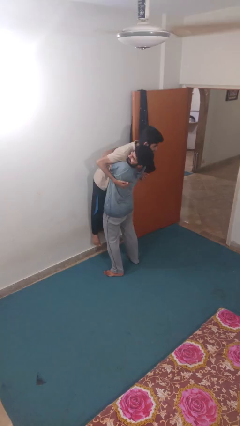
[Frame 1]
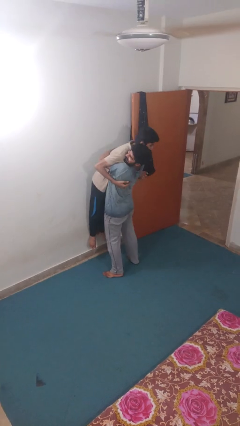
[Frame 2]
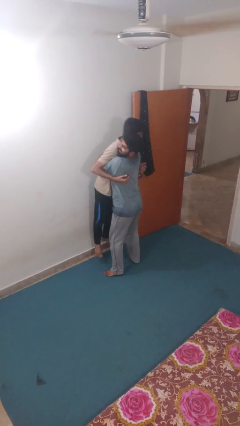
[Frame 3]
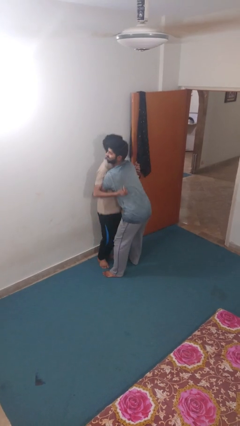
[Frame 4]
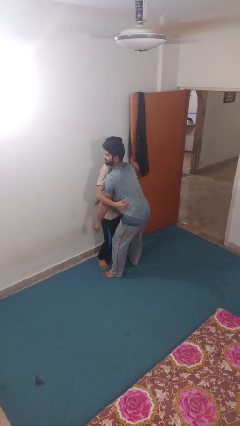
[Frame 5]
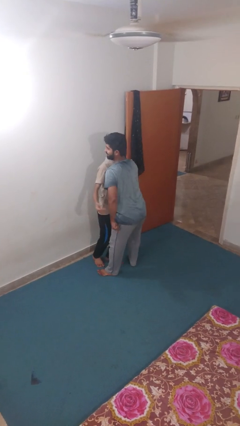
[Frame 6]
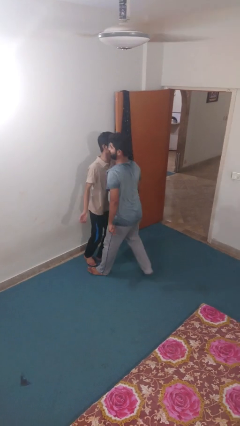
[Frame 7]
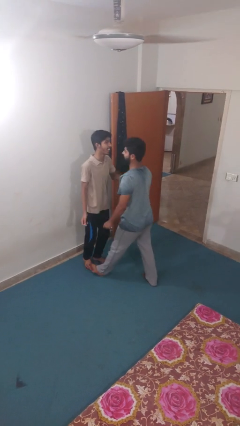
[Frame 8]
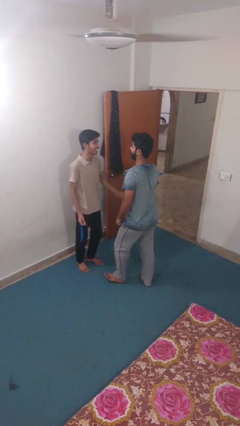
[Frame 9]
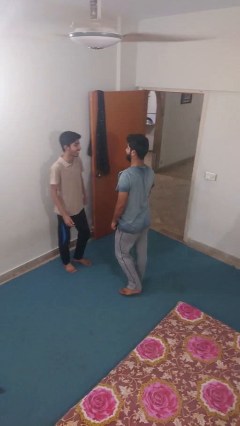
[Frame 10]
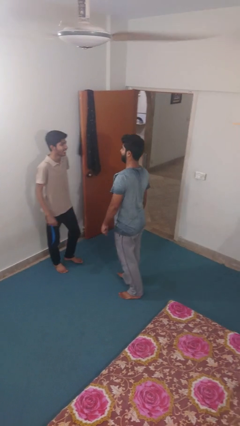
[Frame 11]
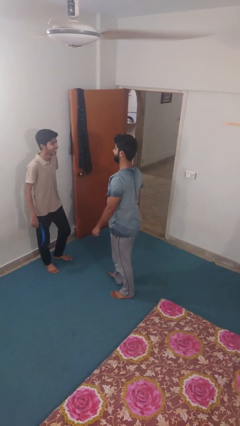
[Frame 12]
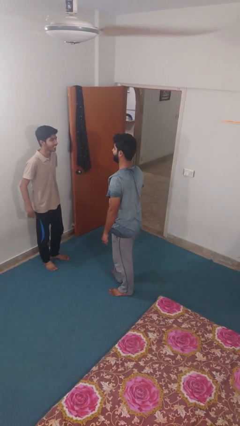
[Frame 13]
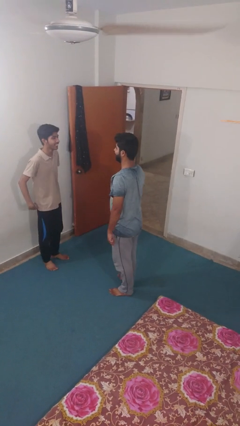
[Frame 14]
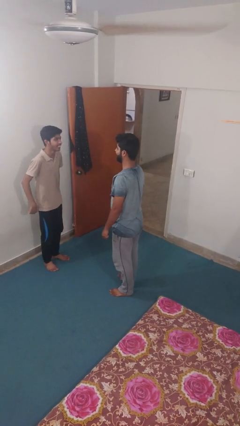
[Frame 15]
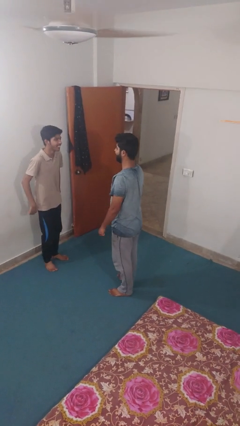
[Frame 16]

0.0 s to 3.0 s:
person puts down person

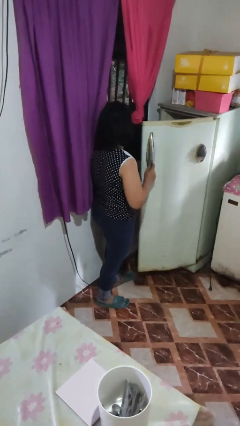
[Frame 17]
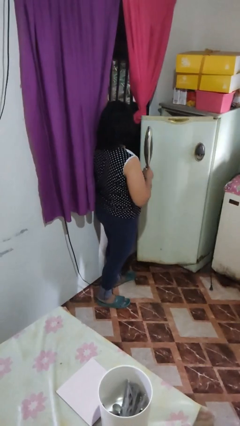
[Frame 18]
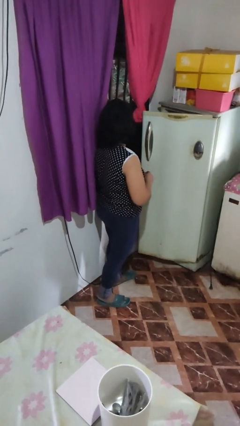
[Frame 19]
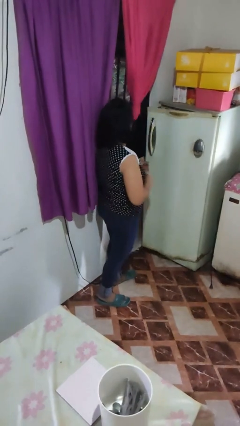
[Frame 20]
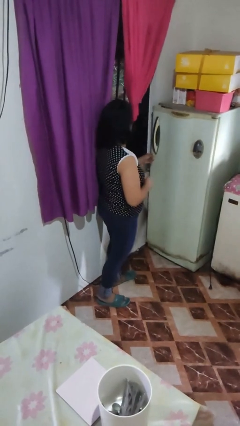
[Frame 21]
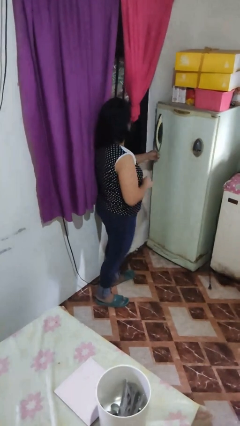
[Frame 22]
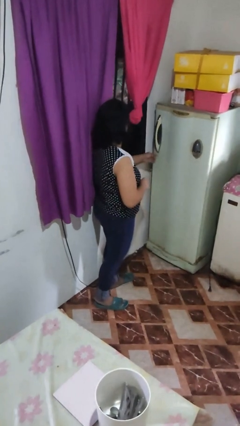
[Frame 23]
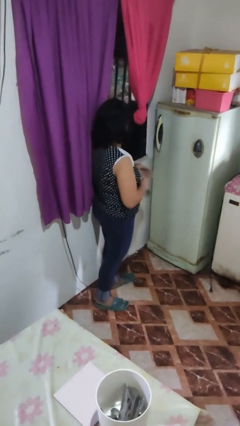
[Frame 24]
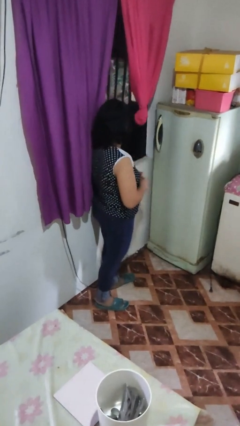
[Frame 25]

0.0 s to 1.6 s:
person closes refrigerator

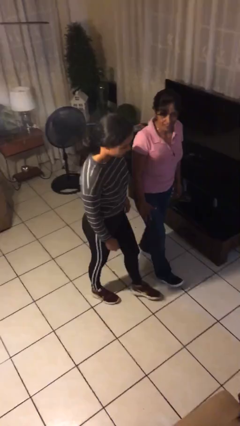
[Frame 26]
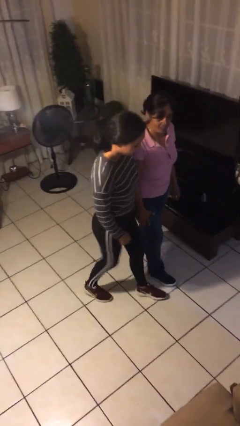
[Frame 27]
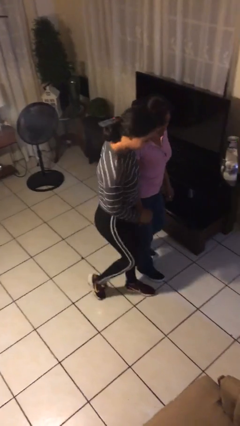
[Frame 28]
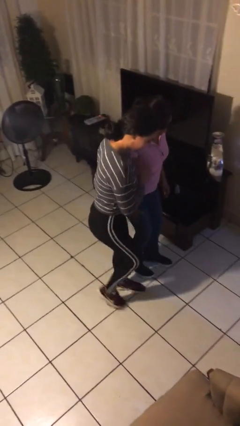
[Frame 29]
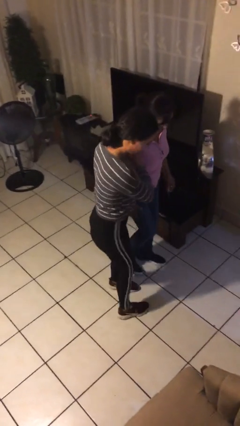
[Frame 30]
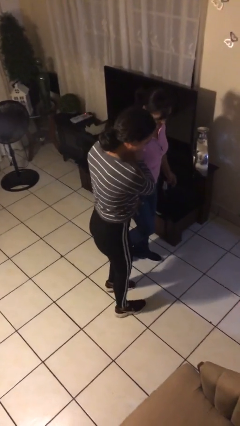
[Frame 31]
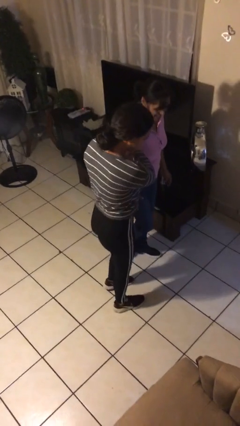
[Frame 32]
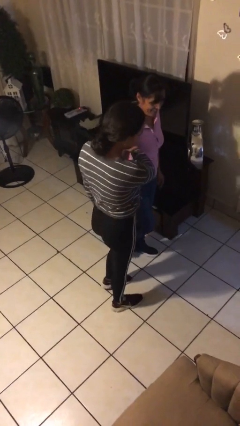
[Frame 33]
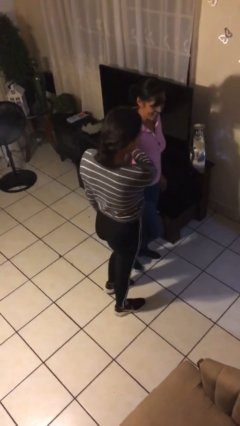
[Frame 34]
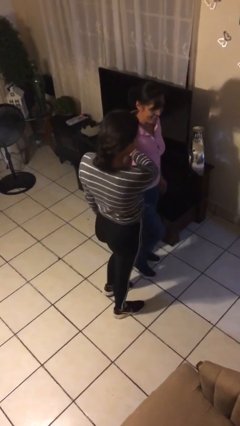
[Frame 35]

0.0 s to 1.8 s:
person bumps into person

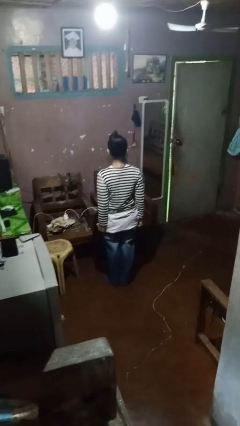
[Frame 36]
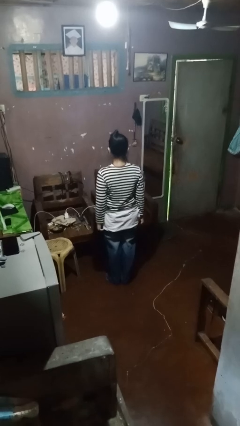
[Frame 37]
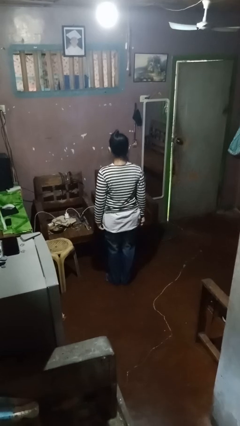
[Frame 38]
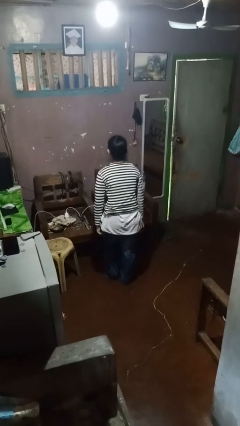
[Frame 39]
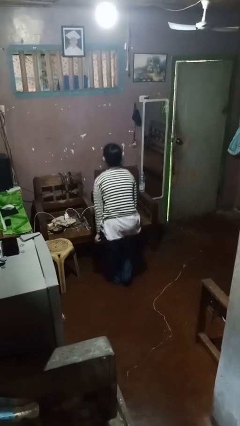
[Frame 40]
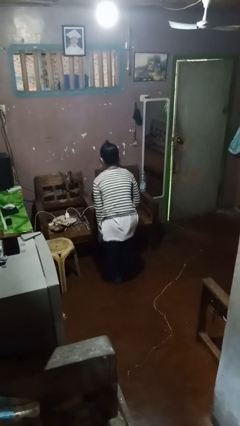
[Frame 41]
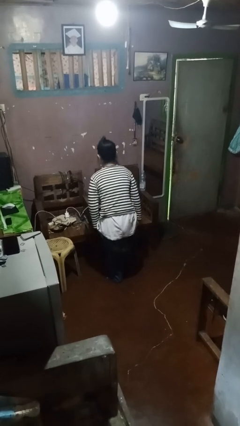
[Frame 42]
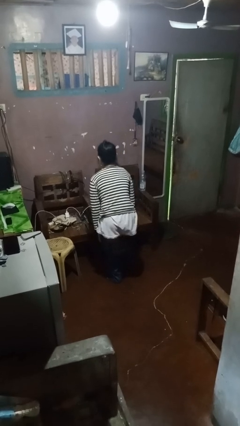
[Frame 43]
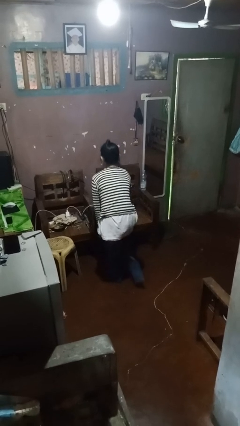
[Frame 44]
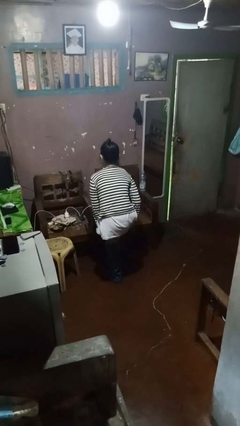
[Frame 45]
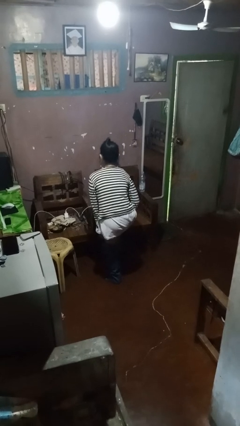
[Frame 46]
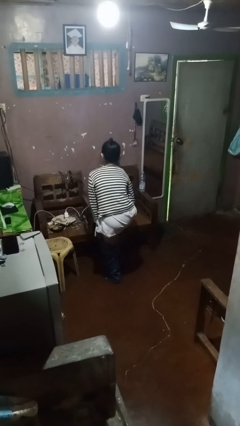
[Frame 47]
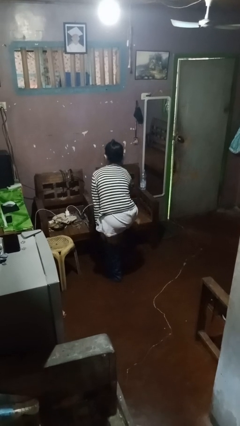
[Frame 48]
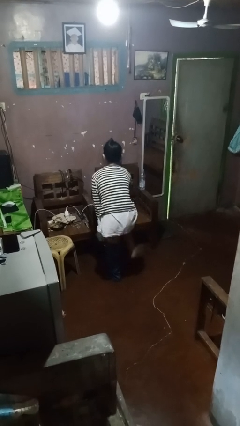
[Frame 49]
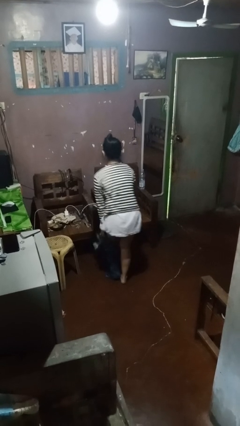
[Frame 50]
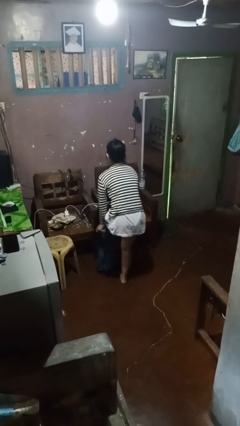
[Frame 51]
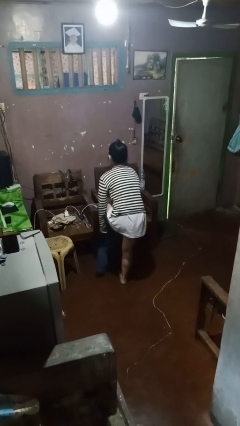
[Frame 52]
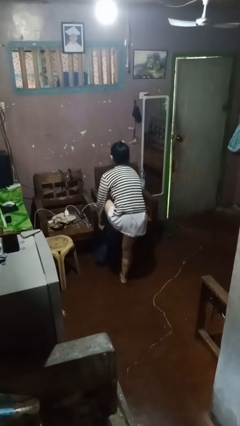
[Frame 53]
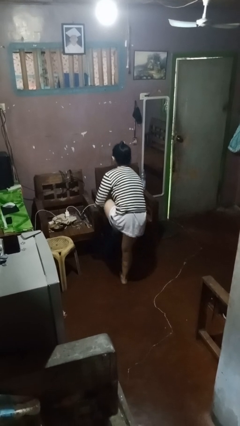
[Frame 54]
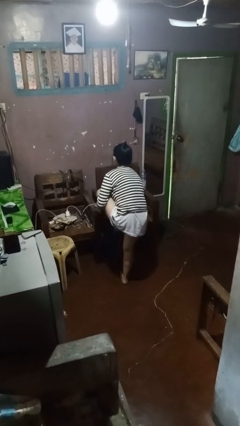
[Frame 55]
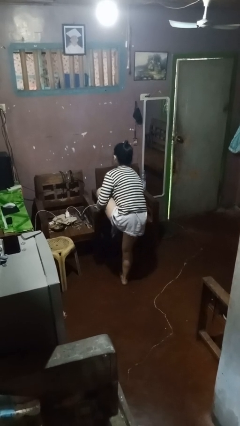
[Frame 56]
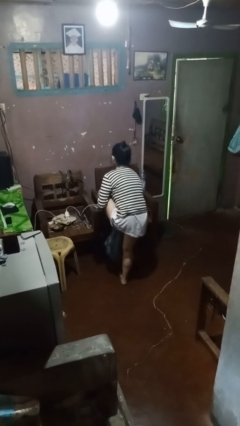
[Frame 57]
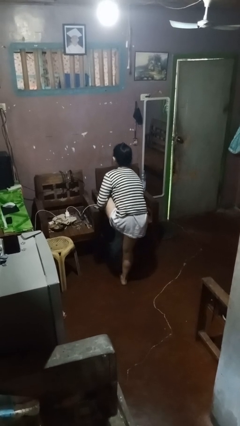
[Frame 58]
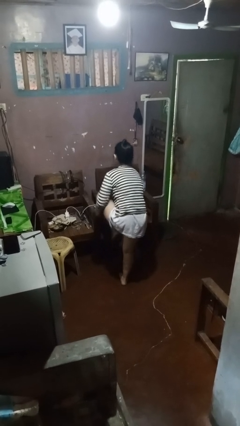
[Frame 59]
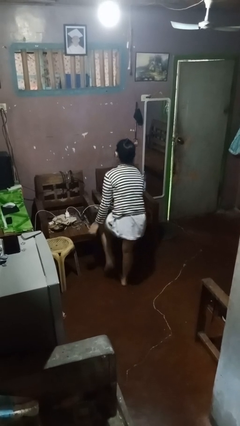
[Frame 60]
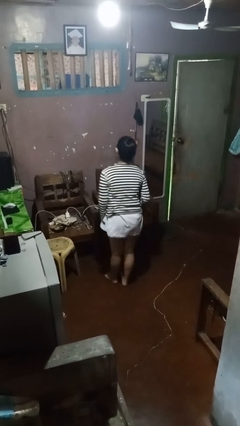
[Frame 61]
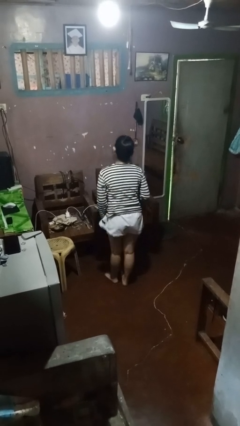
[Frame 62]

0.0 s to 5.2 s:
person takes off pants

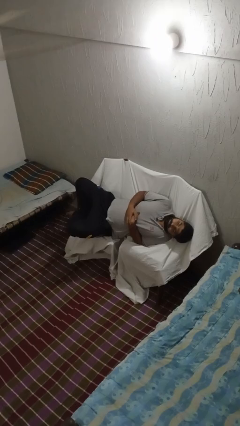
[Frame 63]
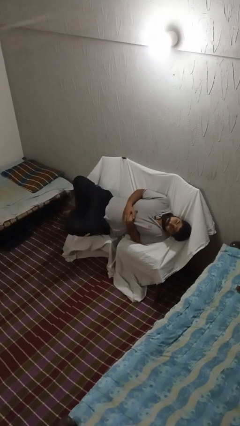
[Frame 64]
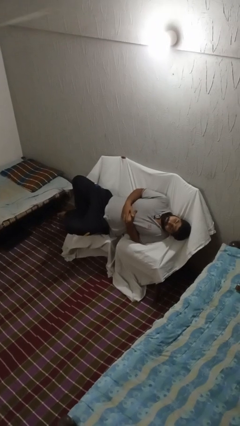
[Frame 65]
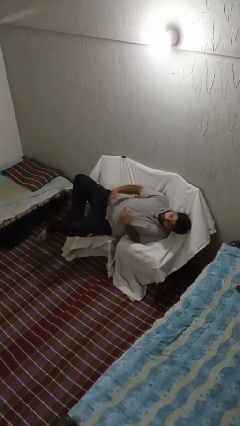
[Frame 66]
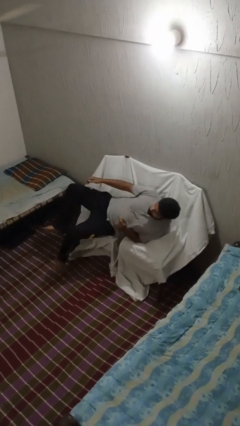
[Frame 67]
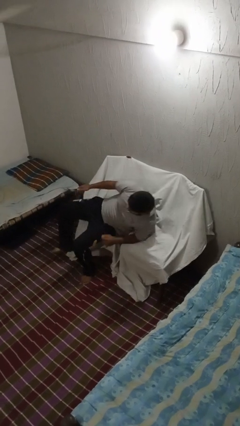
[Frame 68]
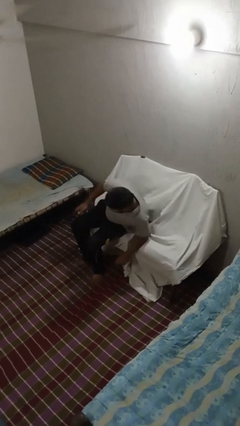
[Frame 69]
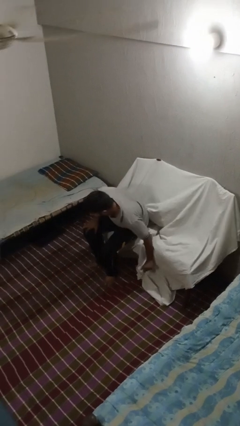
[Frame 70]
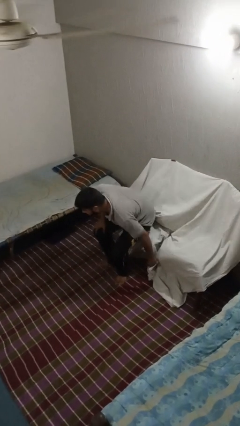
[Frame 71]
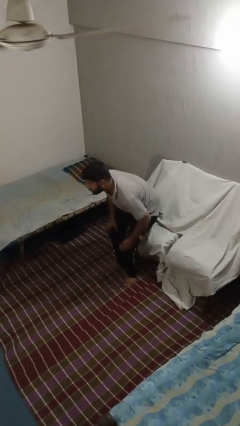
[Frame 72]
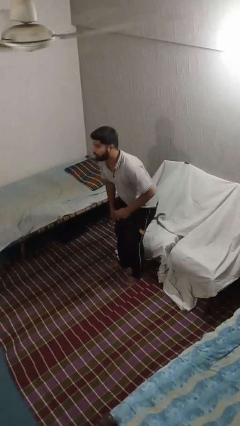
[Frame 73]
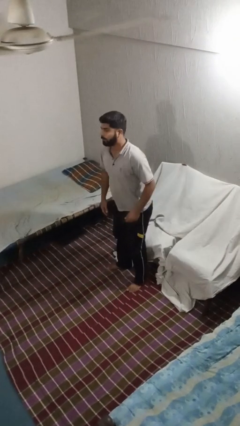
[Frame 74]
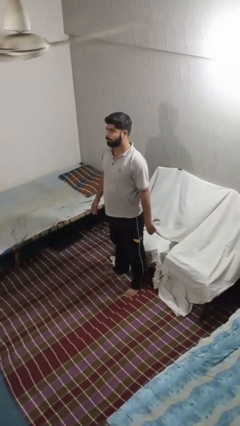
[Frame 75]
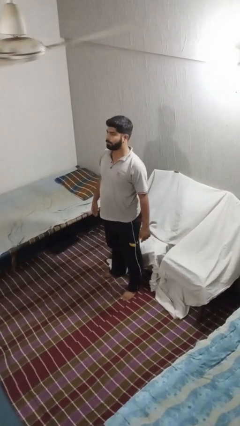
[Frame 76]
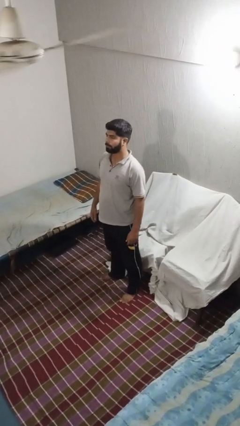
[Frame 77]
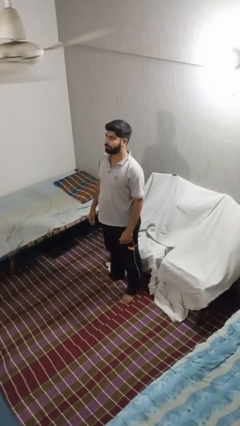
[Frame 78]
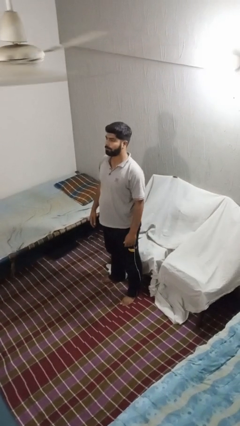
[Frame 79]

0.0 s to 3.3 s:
person stands up

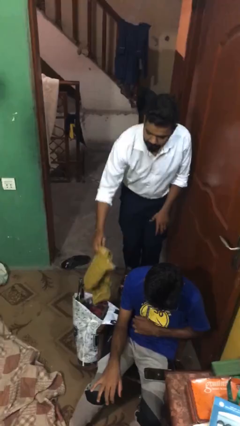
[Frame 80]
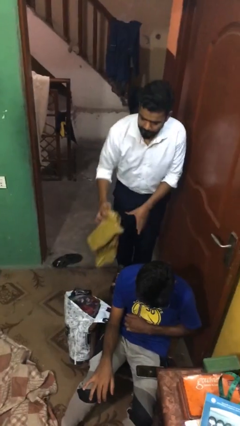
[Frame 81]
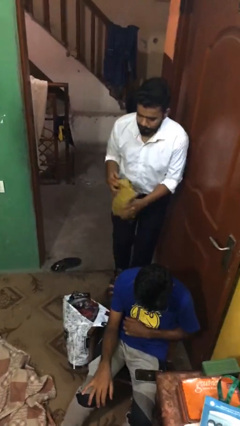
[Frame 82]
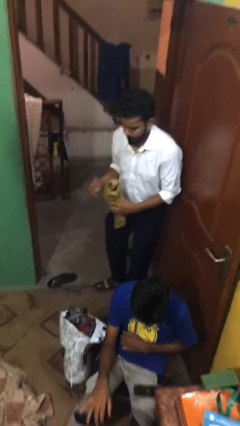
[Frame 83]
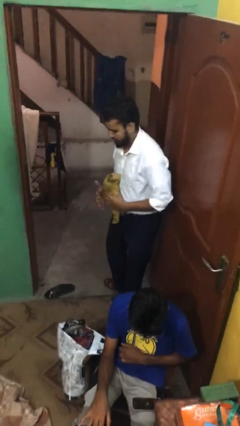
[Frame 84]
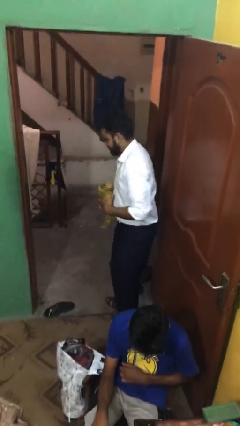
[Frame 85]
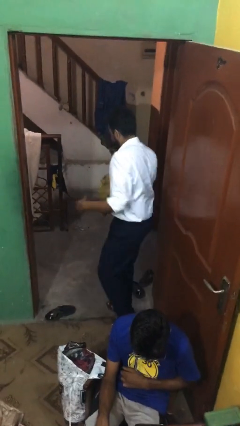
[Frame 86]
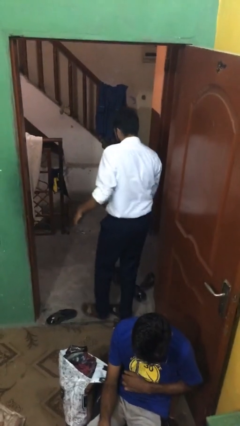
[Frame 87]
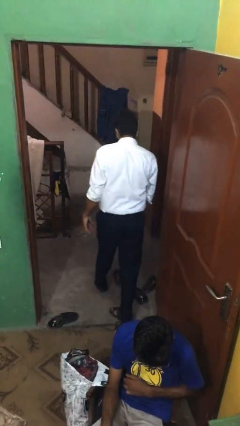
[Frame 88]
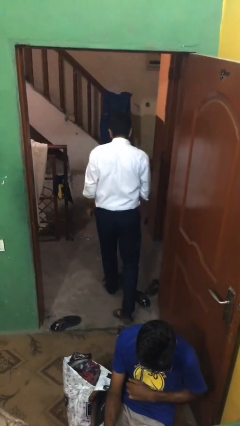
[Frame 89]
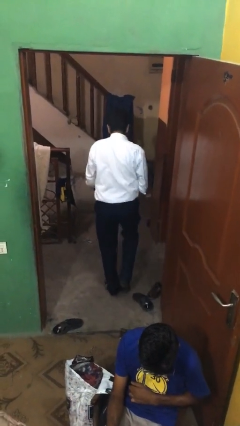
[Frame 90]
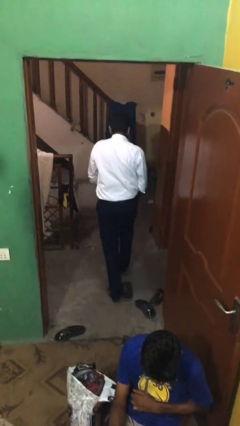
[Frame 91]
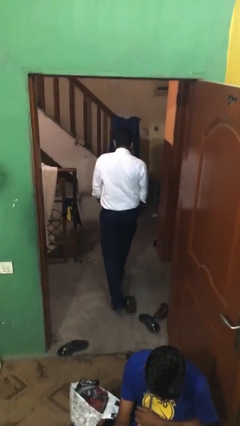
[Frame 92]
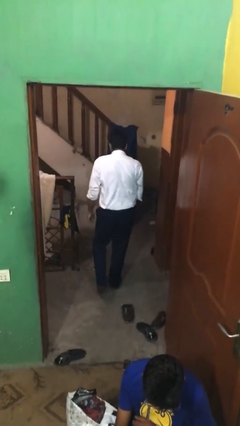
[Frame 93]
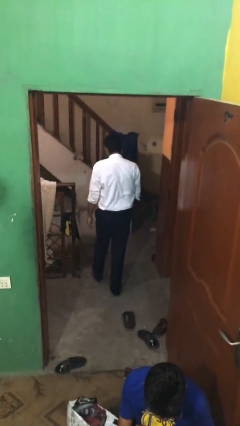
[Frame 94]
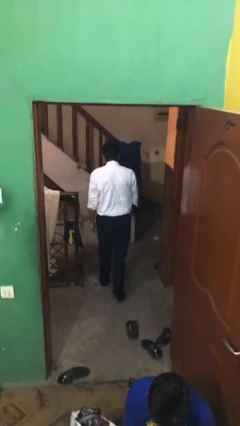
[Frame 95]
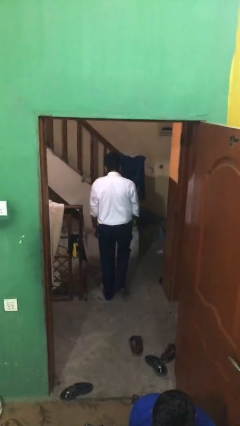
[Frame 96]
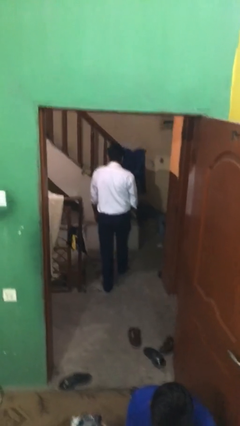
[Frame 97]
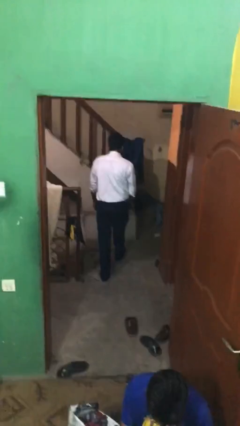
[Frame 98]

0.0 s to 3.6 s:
person steals object from person
